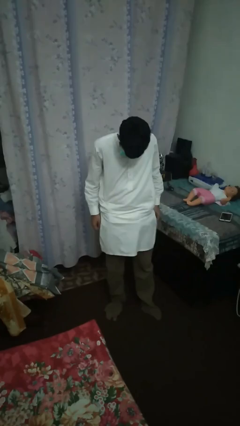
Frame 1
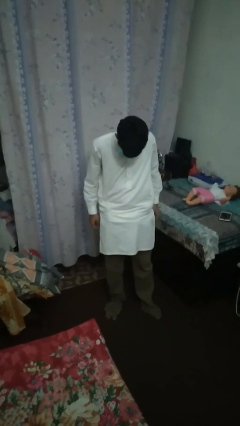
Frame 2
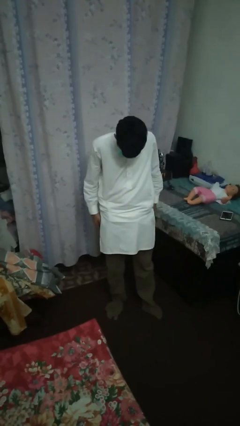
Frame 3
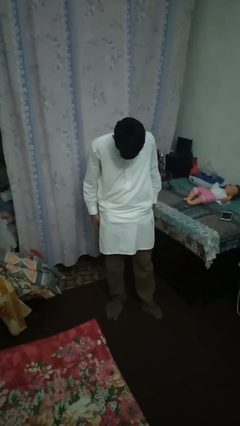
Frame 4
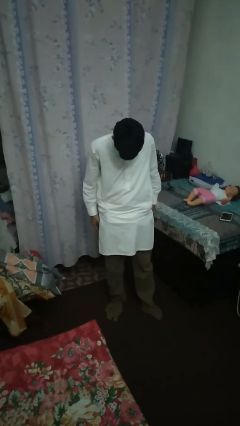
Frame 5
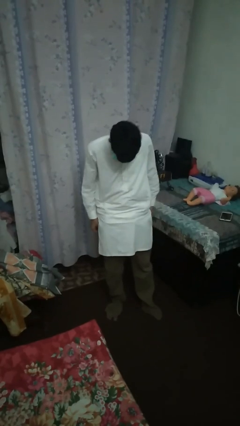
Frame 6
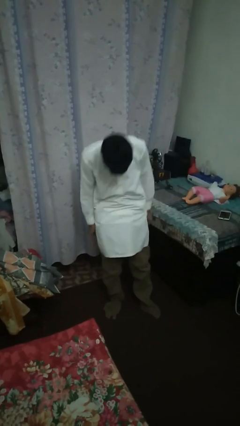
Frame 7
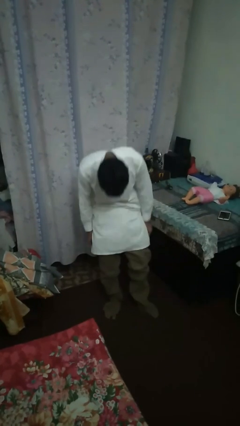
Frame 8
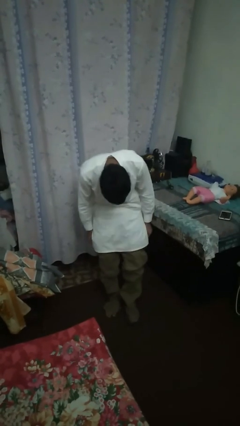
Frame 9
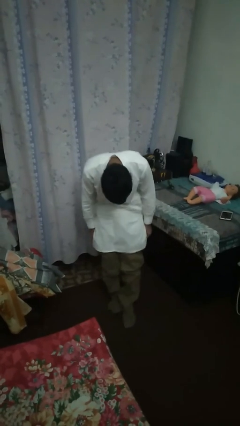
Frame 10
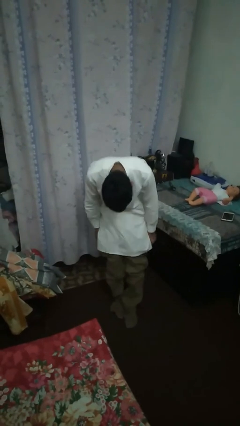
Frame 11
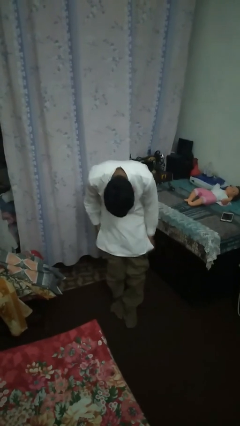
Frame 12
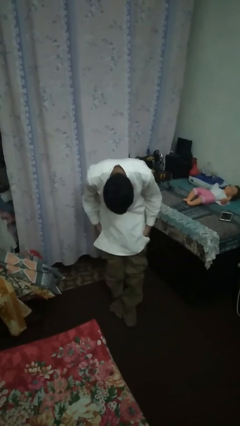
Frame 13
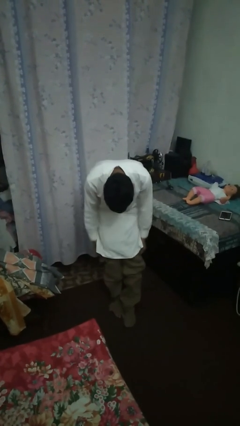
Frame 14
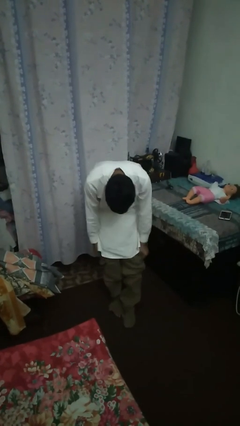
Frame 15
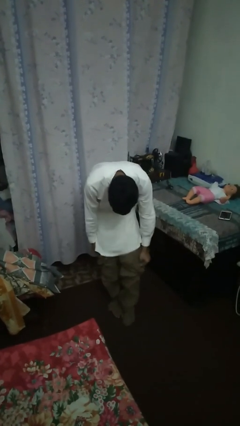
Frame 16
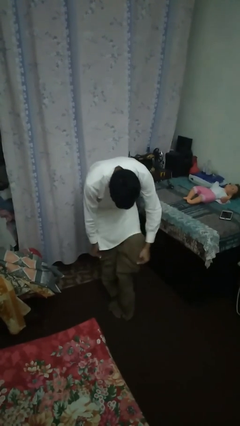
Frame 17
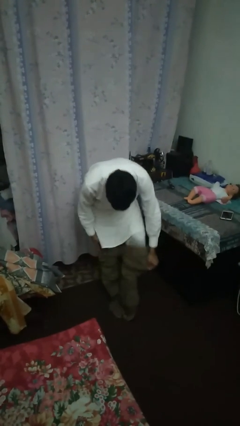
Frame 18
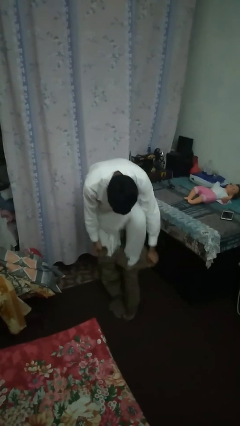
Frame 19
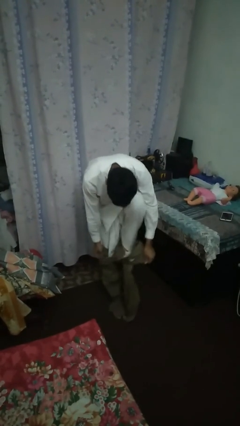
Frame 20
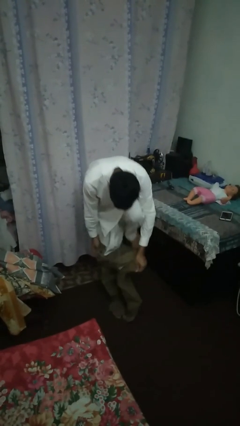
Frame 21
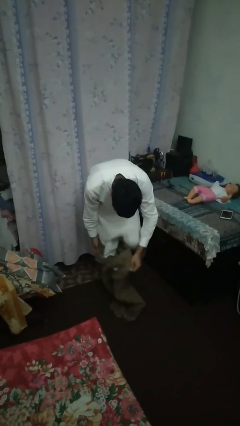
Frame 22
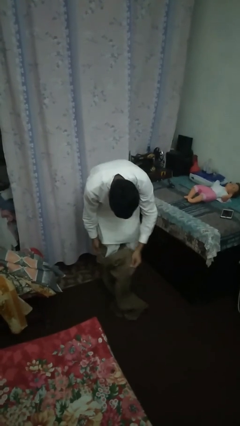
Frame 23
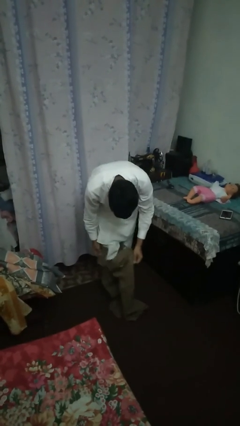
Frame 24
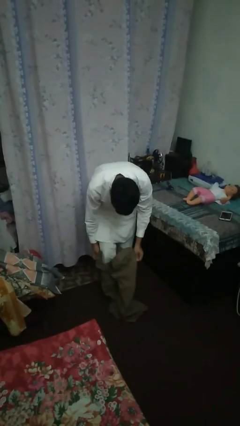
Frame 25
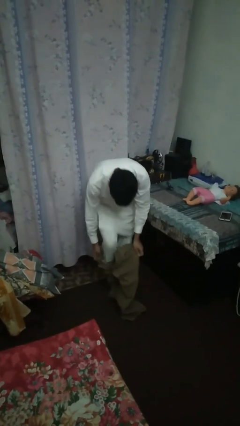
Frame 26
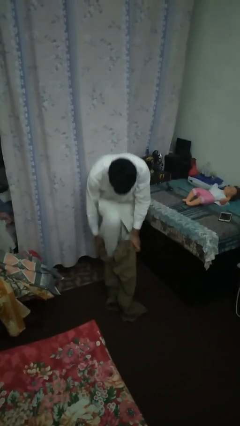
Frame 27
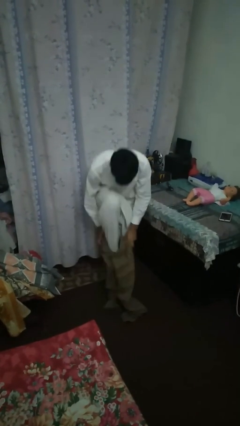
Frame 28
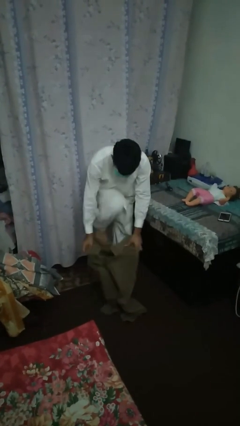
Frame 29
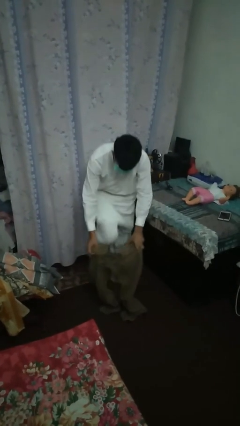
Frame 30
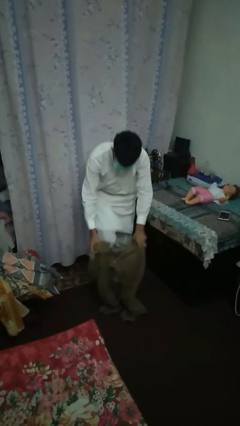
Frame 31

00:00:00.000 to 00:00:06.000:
person takes off pants

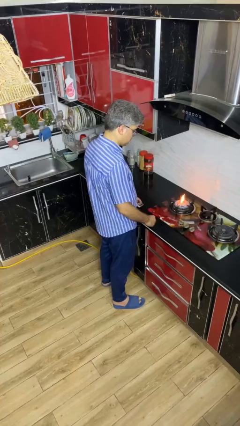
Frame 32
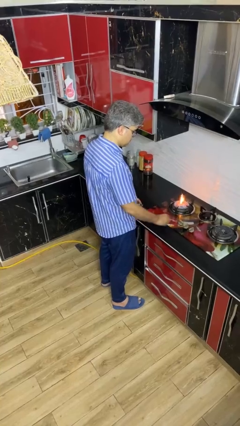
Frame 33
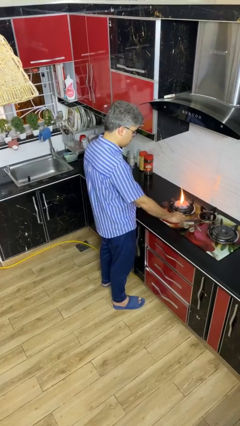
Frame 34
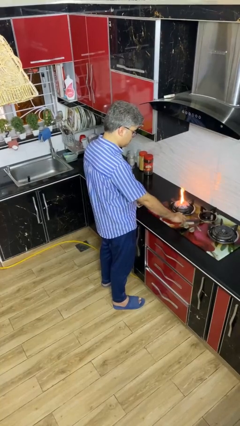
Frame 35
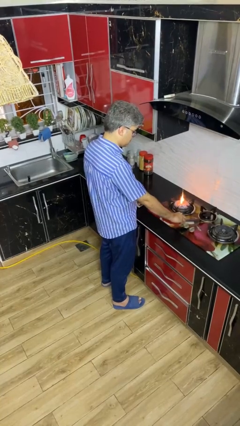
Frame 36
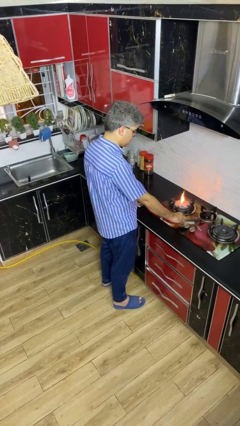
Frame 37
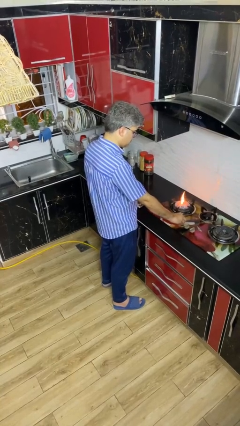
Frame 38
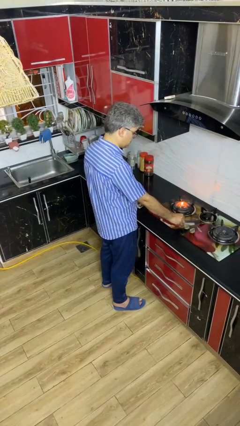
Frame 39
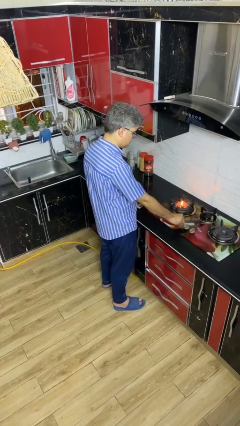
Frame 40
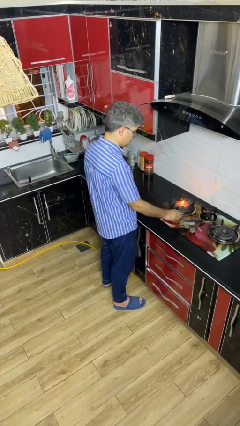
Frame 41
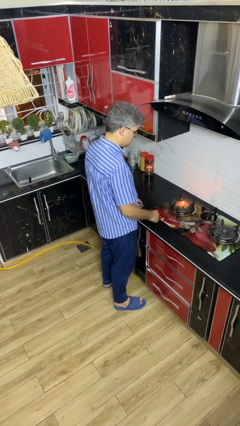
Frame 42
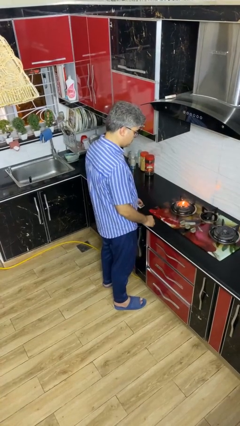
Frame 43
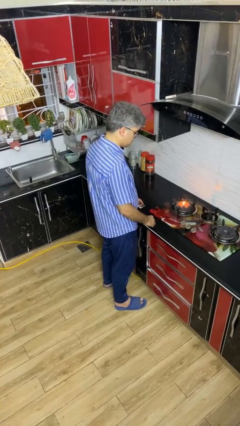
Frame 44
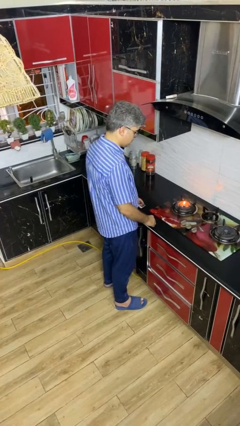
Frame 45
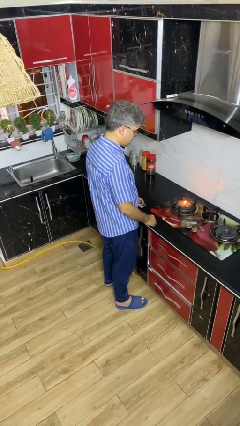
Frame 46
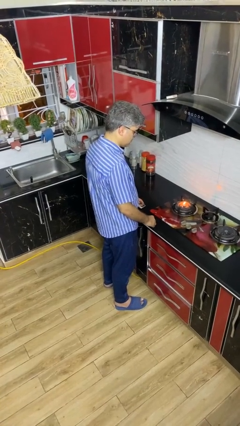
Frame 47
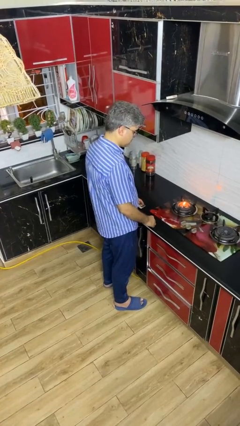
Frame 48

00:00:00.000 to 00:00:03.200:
person turns off stovetop

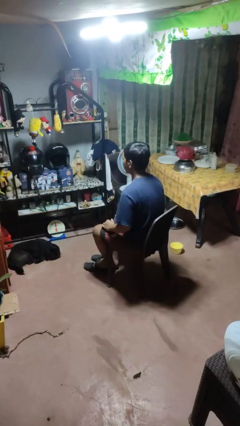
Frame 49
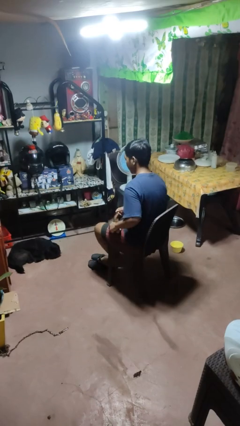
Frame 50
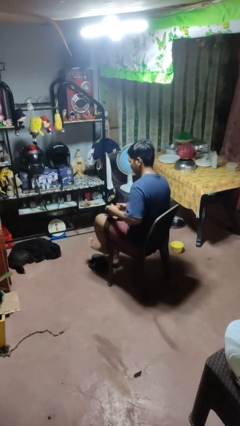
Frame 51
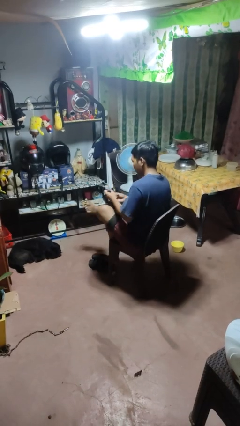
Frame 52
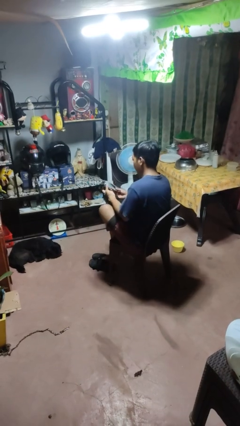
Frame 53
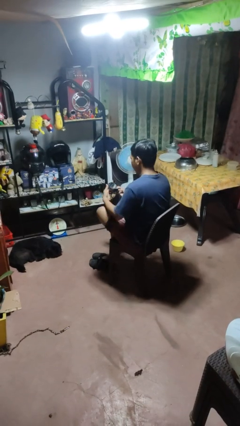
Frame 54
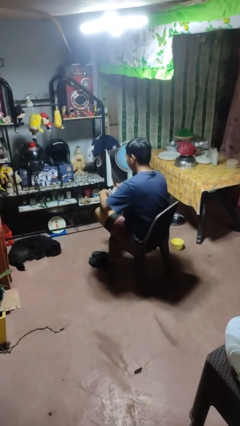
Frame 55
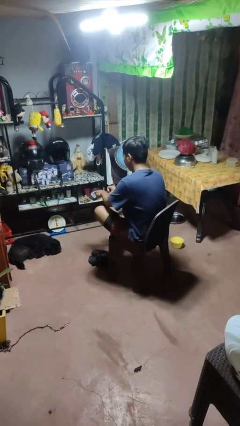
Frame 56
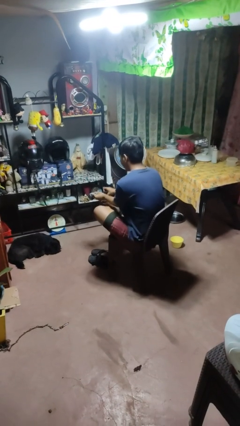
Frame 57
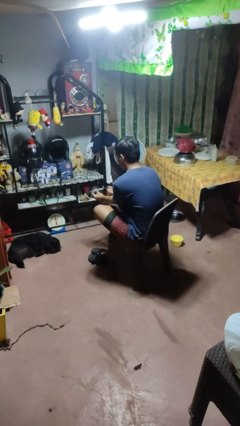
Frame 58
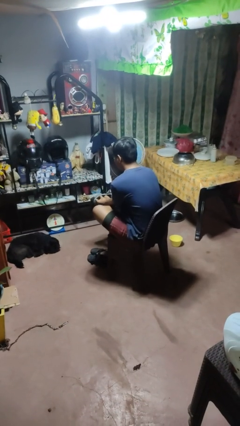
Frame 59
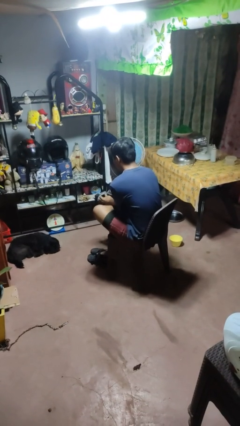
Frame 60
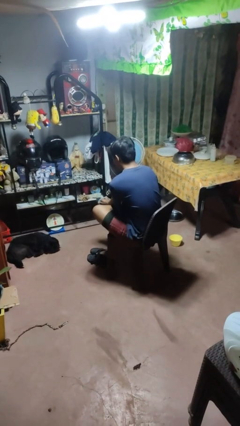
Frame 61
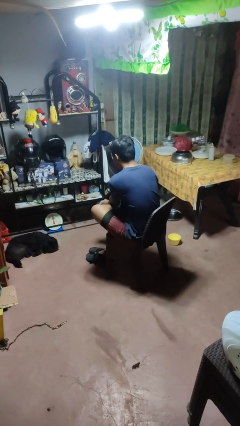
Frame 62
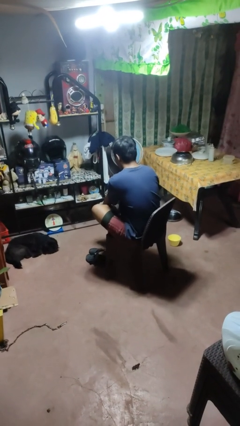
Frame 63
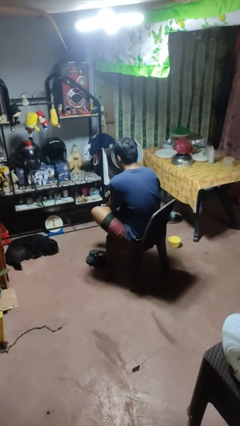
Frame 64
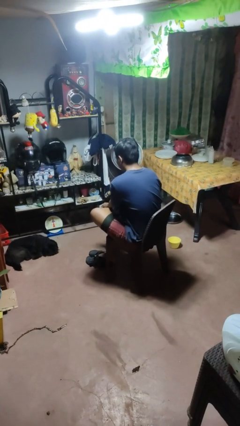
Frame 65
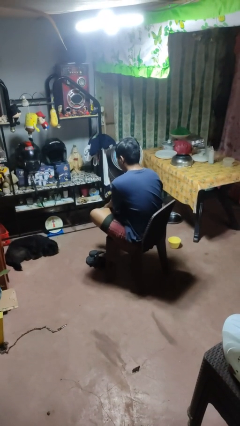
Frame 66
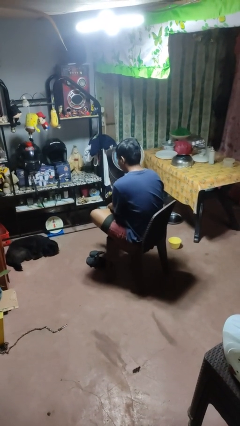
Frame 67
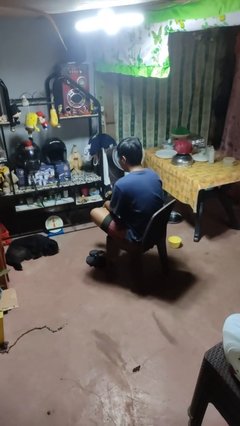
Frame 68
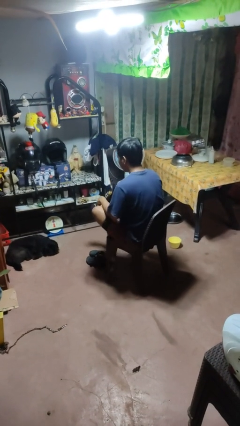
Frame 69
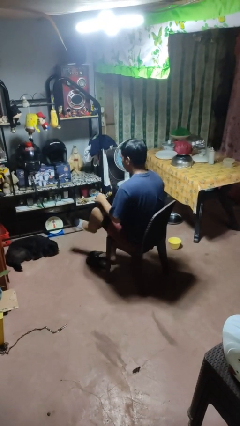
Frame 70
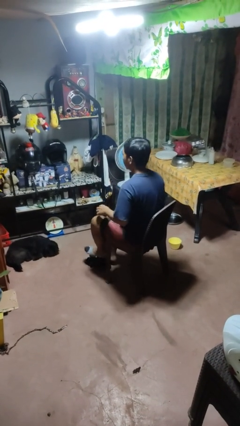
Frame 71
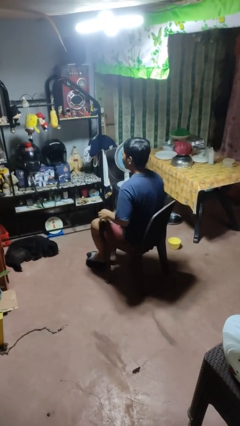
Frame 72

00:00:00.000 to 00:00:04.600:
person puts on socks

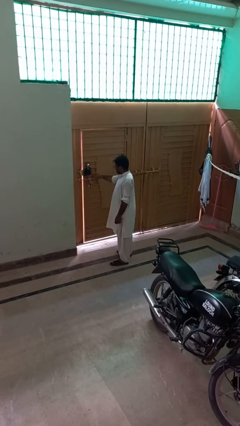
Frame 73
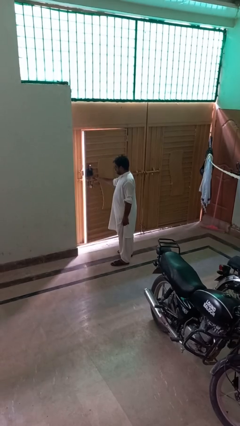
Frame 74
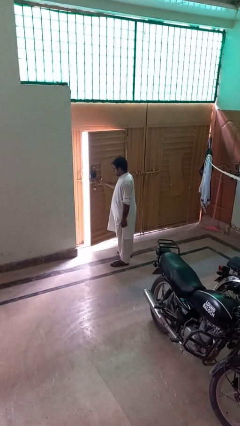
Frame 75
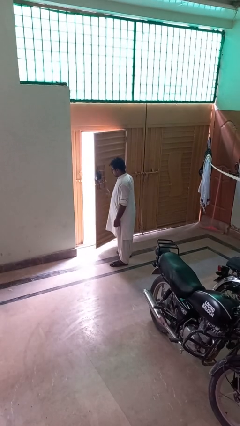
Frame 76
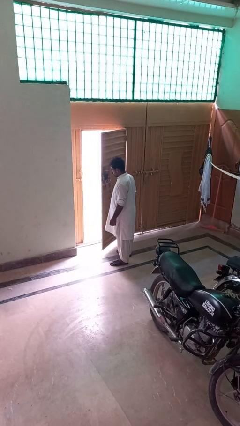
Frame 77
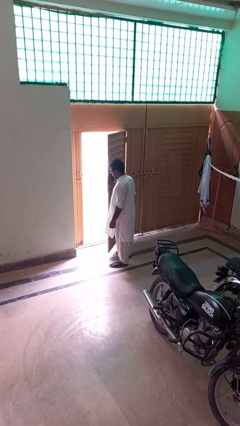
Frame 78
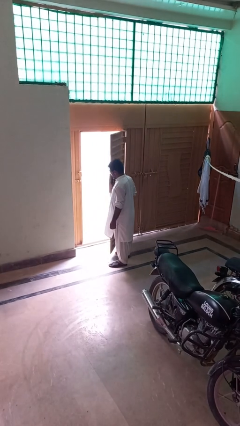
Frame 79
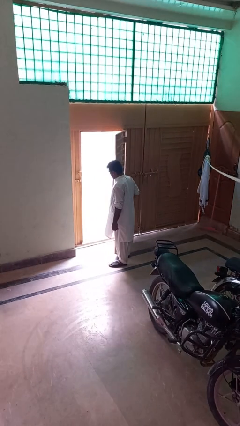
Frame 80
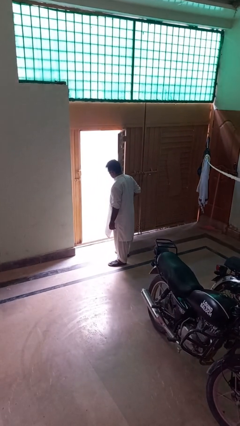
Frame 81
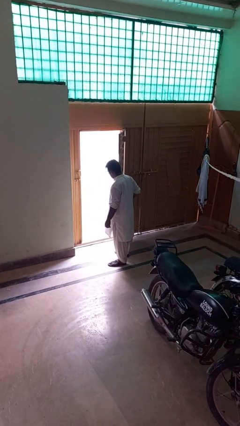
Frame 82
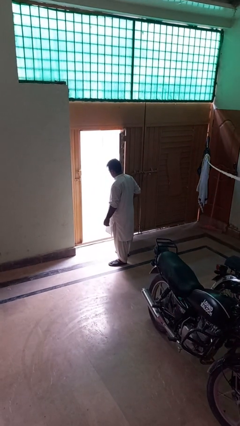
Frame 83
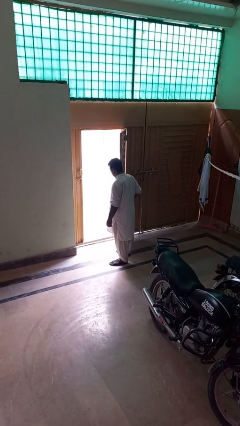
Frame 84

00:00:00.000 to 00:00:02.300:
person opens gate

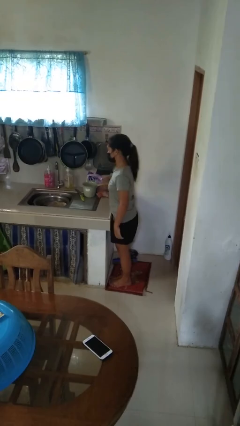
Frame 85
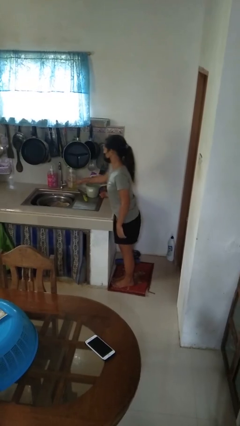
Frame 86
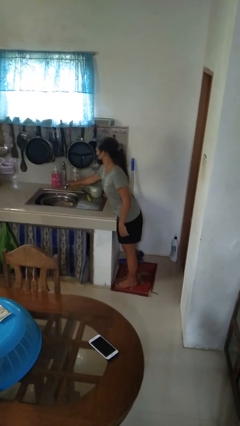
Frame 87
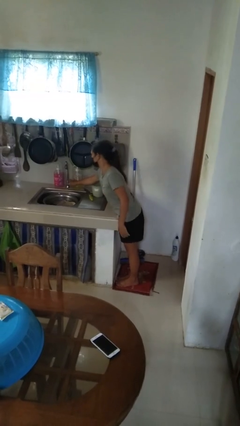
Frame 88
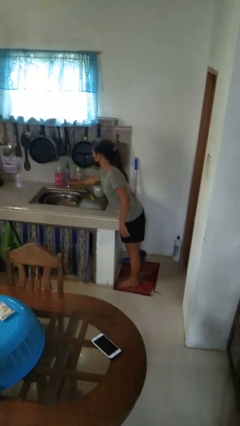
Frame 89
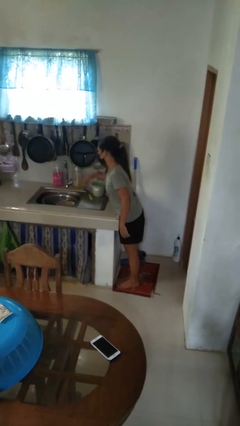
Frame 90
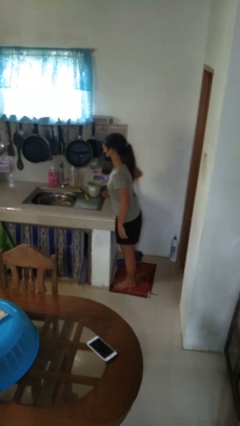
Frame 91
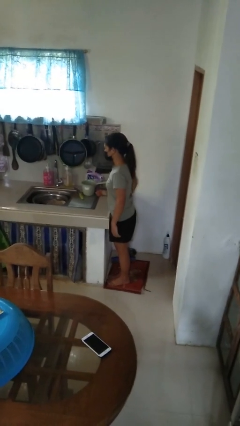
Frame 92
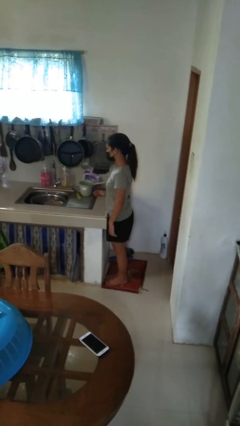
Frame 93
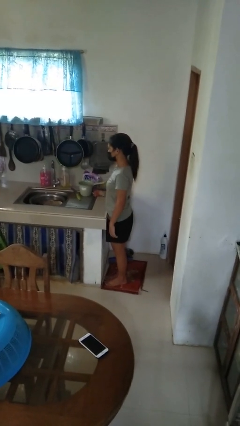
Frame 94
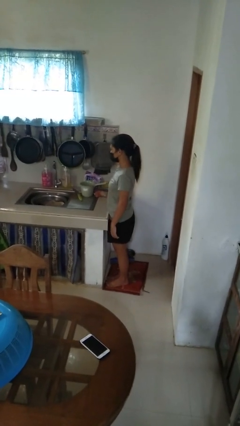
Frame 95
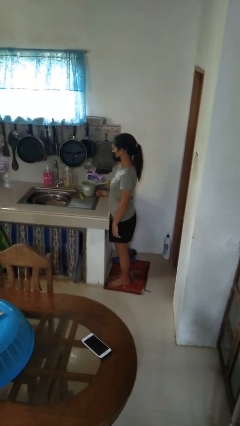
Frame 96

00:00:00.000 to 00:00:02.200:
person turns off faucet
